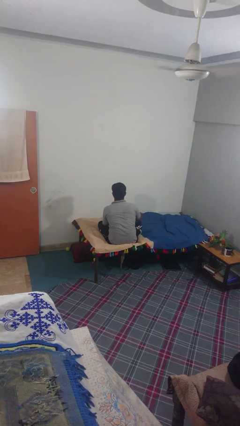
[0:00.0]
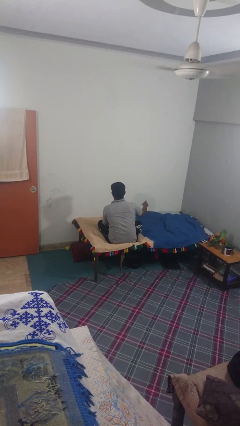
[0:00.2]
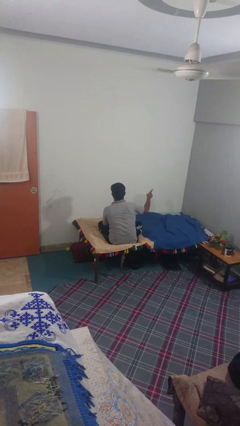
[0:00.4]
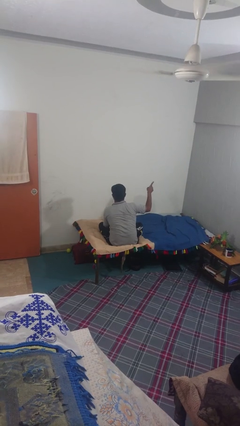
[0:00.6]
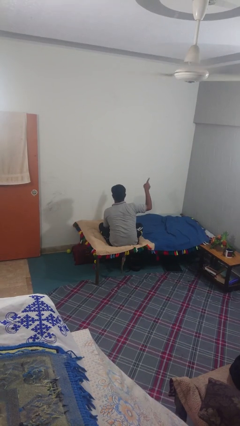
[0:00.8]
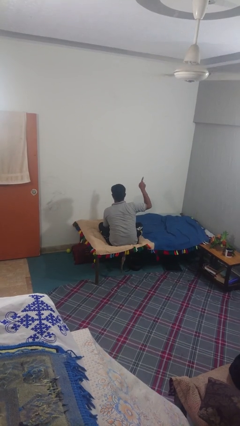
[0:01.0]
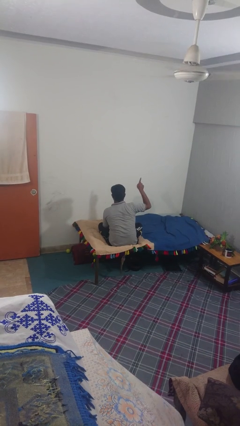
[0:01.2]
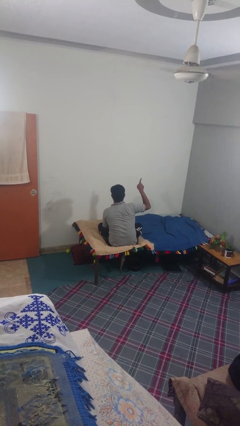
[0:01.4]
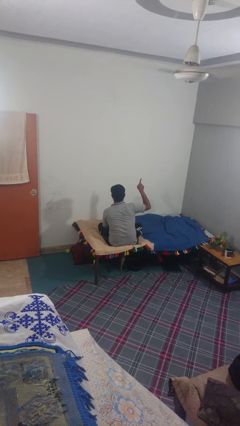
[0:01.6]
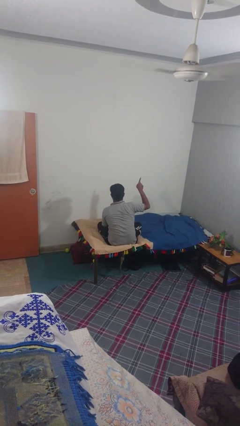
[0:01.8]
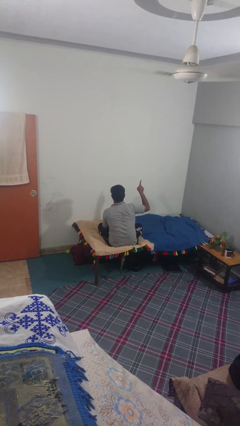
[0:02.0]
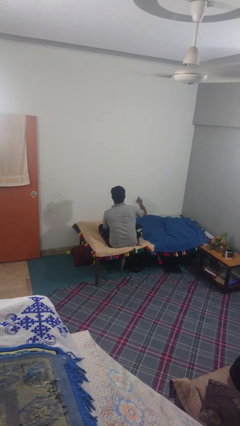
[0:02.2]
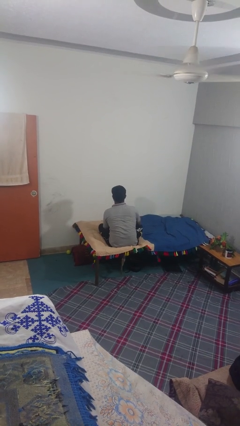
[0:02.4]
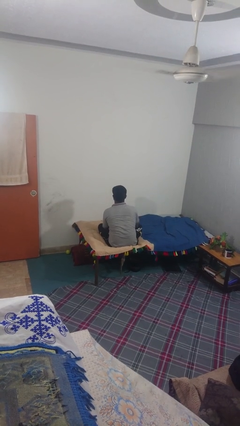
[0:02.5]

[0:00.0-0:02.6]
person gestures number one

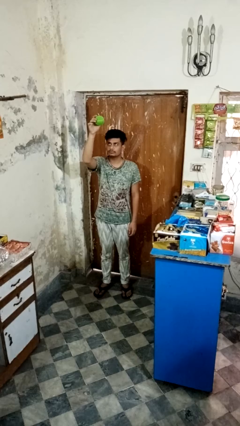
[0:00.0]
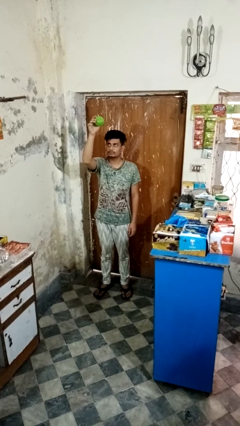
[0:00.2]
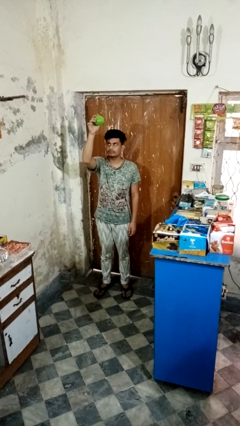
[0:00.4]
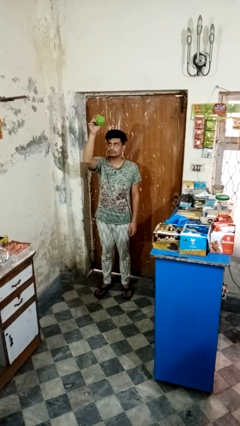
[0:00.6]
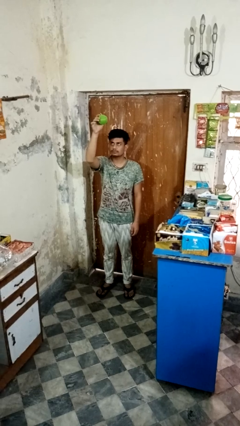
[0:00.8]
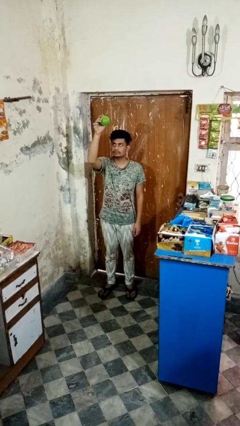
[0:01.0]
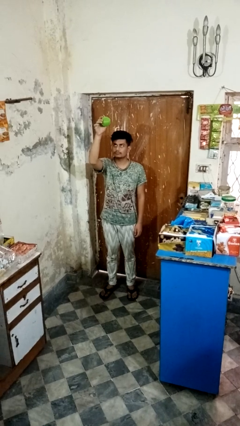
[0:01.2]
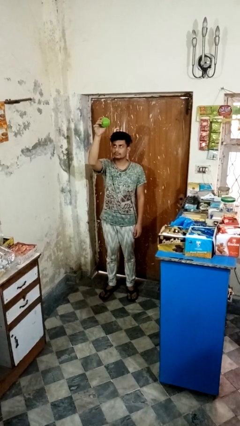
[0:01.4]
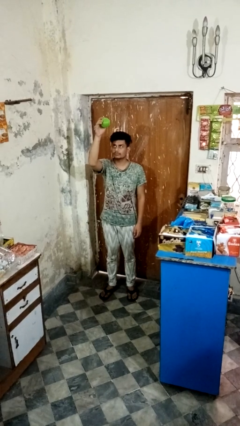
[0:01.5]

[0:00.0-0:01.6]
person drops object

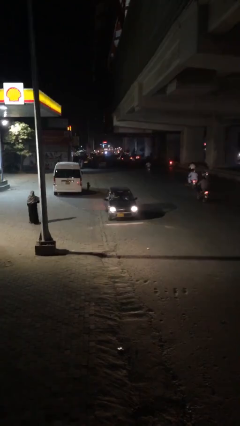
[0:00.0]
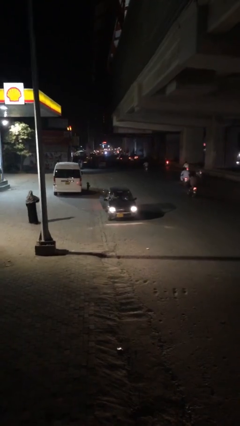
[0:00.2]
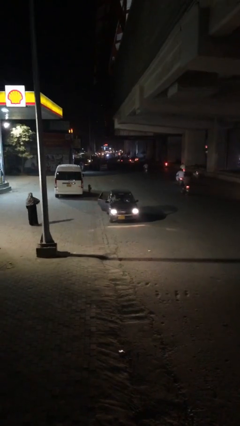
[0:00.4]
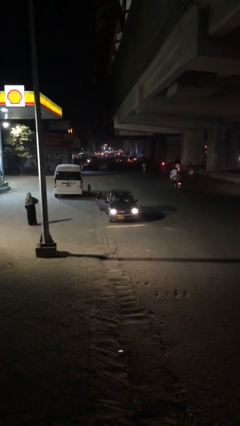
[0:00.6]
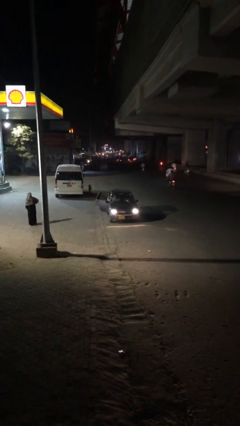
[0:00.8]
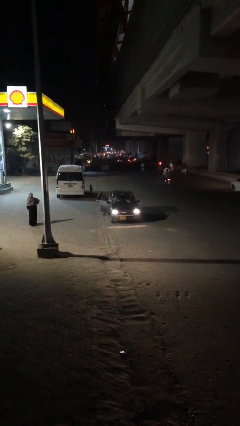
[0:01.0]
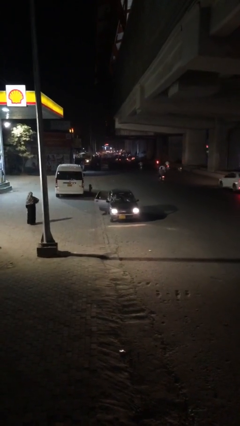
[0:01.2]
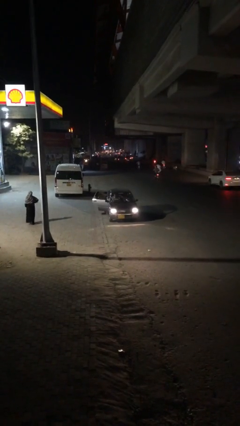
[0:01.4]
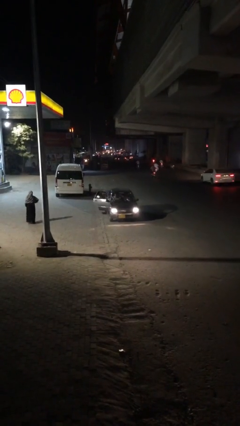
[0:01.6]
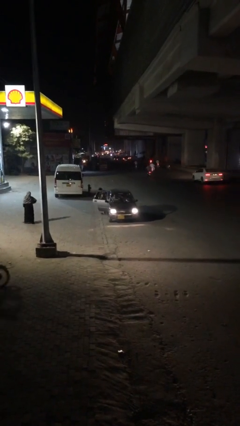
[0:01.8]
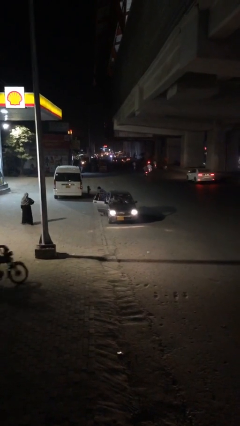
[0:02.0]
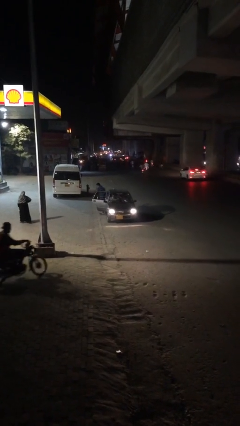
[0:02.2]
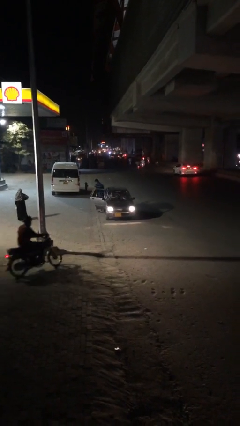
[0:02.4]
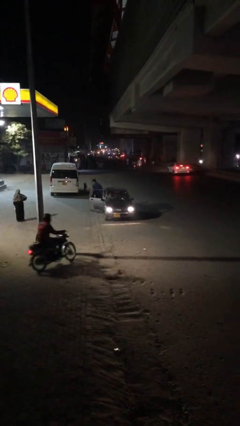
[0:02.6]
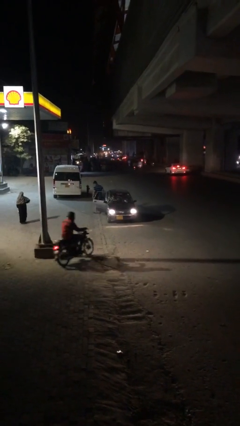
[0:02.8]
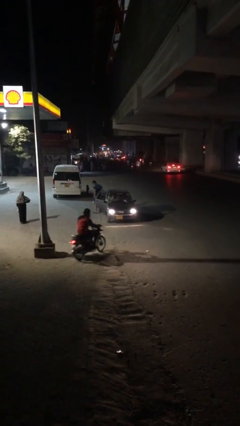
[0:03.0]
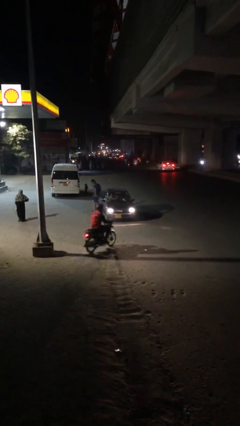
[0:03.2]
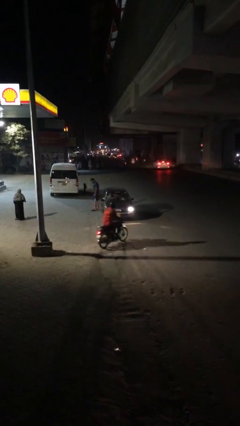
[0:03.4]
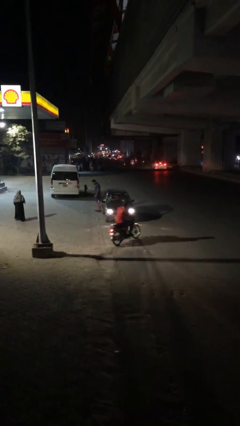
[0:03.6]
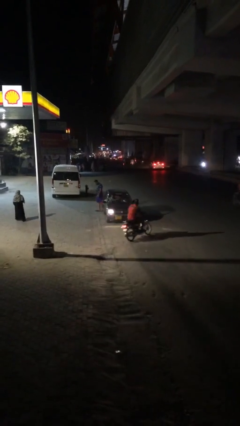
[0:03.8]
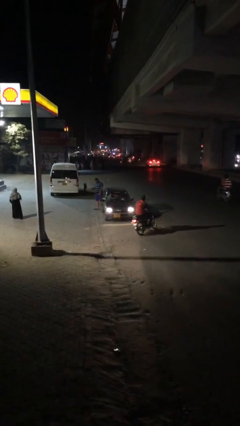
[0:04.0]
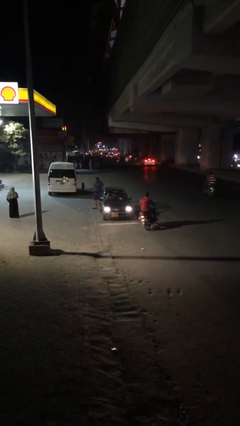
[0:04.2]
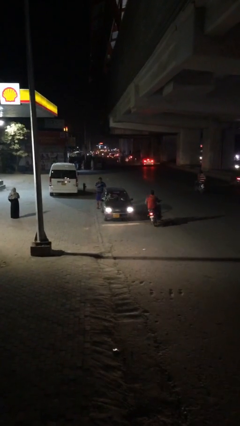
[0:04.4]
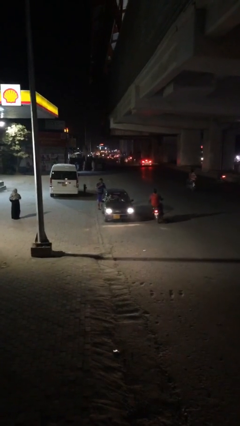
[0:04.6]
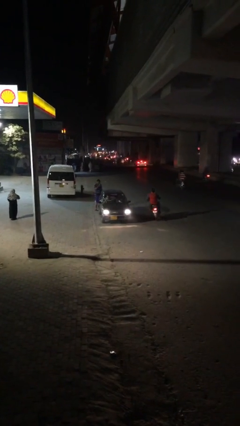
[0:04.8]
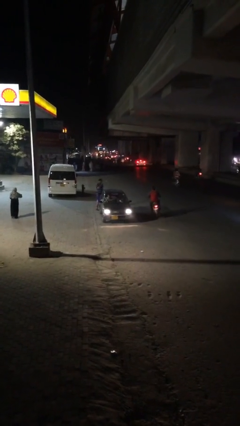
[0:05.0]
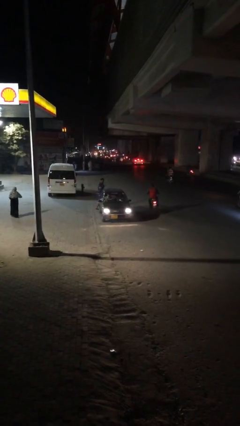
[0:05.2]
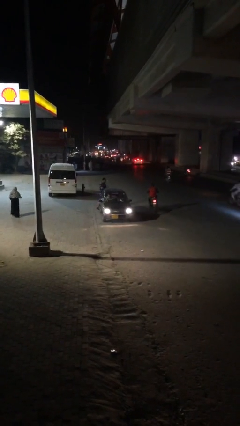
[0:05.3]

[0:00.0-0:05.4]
car drops off person

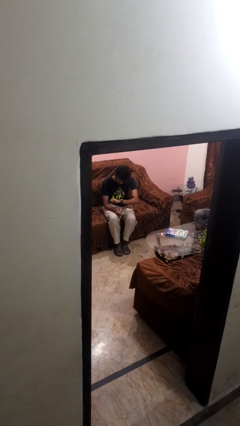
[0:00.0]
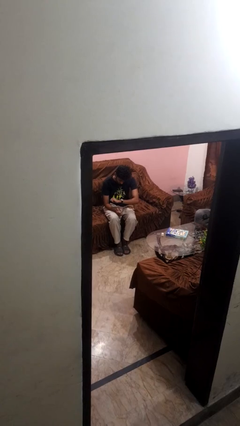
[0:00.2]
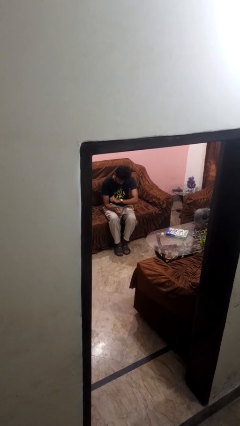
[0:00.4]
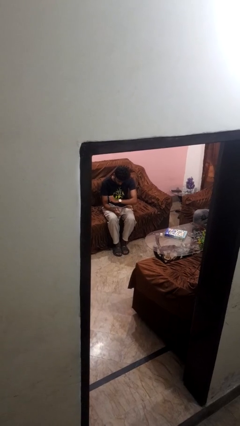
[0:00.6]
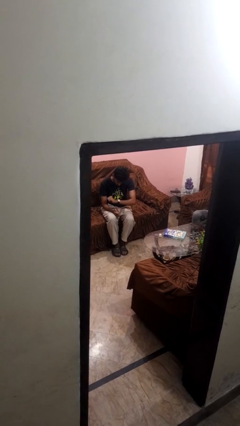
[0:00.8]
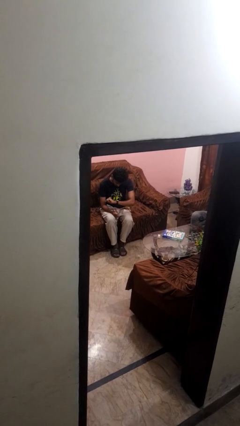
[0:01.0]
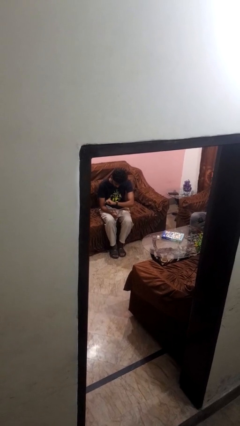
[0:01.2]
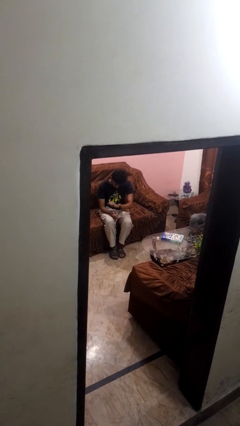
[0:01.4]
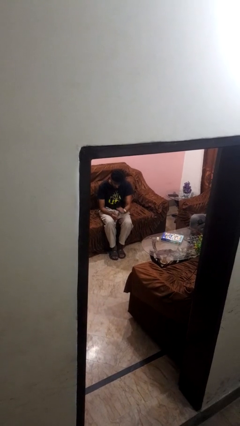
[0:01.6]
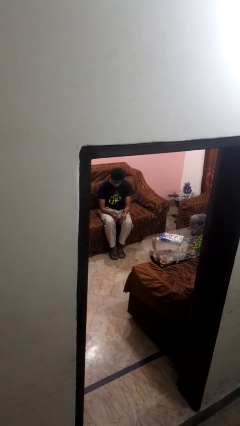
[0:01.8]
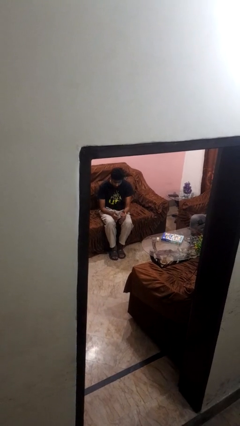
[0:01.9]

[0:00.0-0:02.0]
person looks at wristwatch

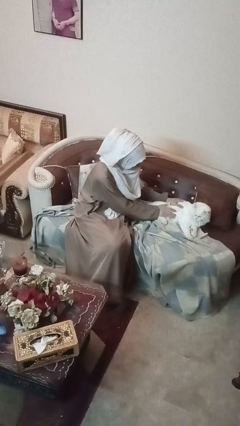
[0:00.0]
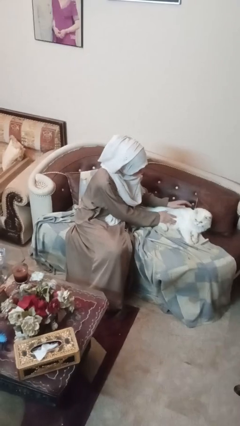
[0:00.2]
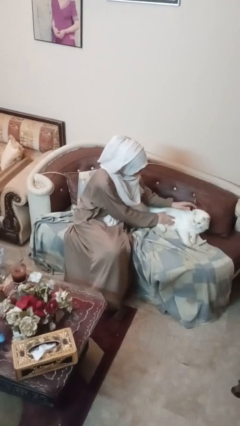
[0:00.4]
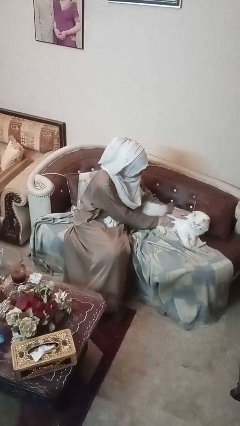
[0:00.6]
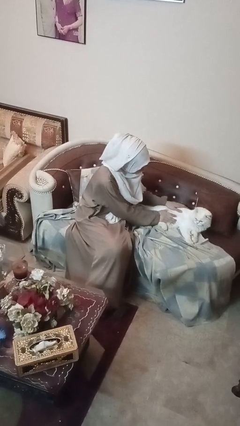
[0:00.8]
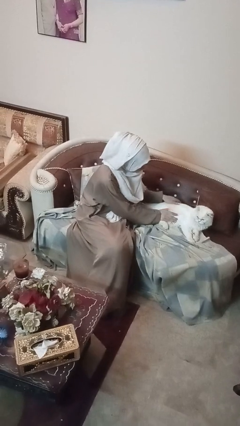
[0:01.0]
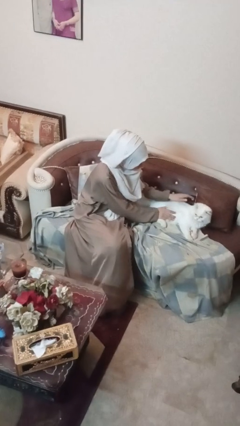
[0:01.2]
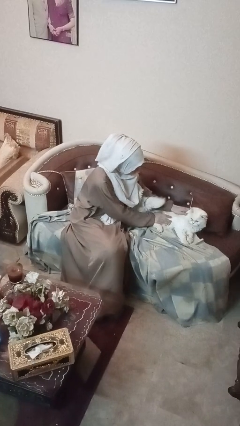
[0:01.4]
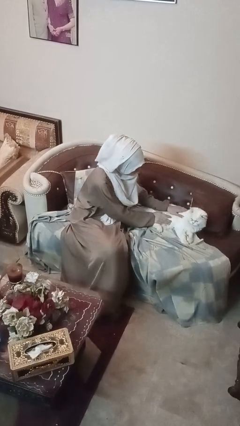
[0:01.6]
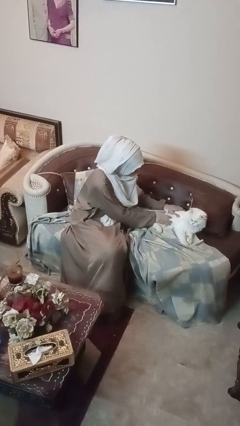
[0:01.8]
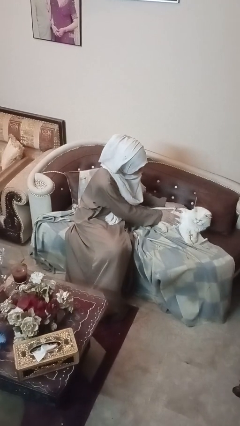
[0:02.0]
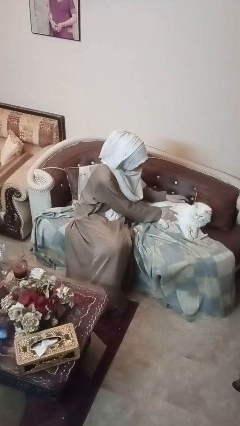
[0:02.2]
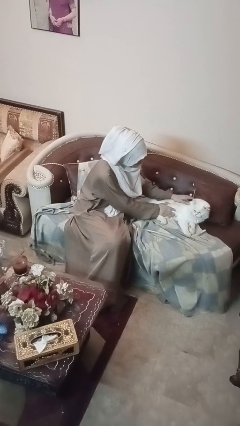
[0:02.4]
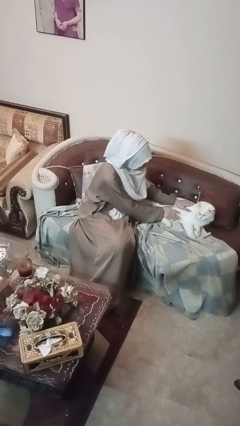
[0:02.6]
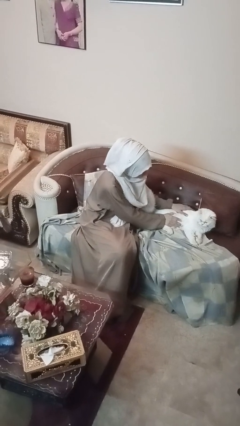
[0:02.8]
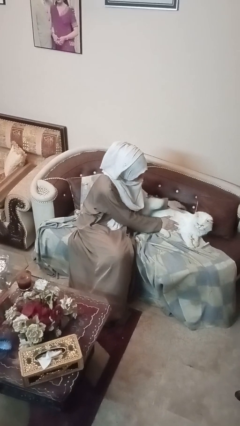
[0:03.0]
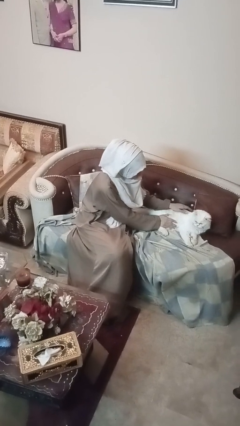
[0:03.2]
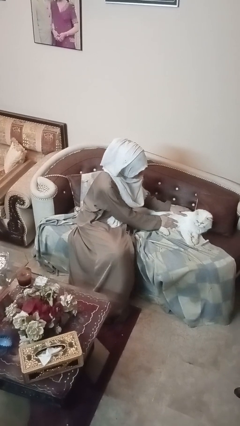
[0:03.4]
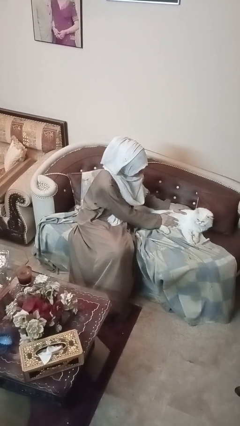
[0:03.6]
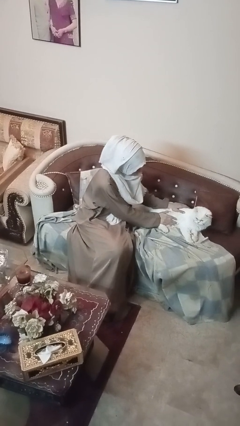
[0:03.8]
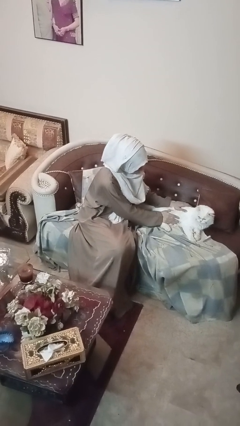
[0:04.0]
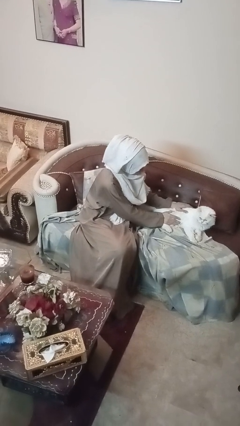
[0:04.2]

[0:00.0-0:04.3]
person pets cat

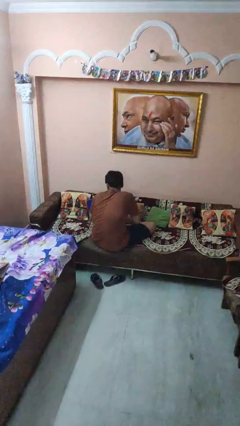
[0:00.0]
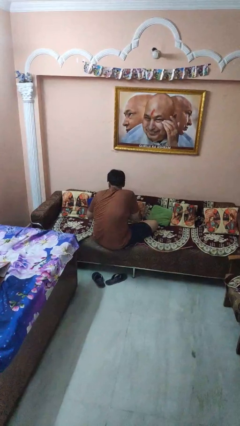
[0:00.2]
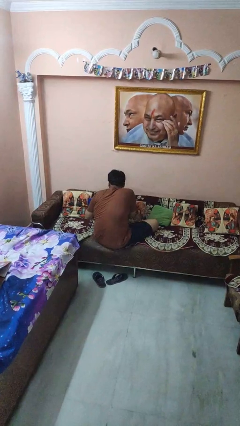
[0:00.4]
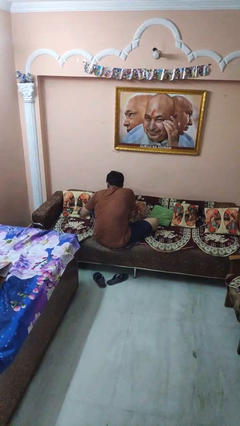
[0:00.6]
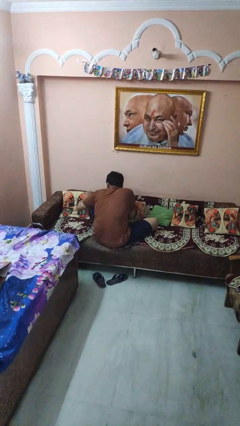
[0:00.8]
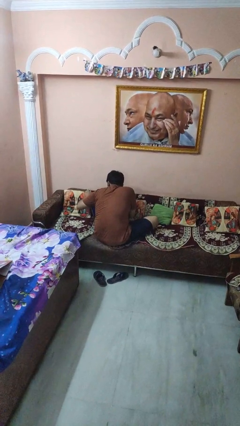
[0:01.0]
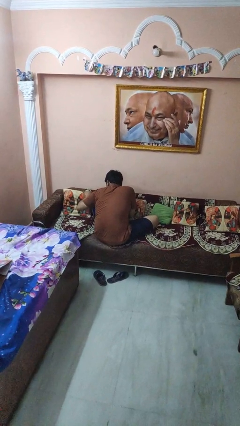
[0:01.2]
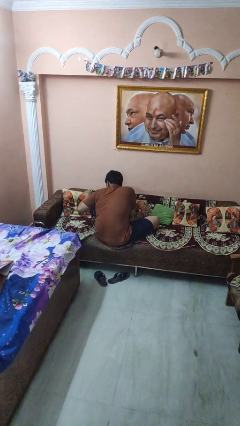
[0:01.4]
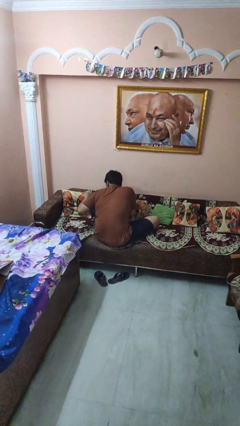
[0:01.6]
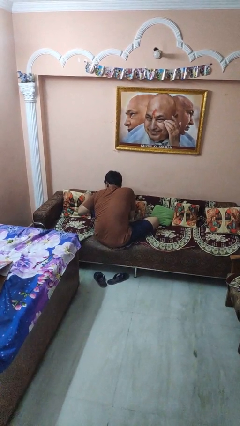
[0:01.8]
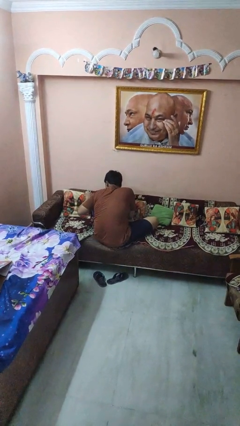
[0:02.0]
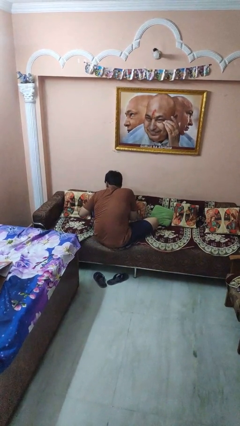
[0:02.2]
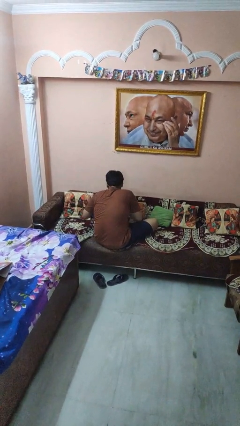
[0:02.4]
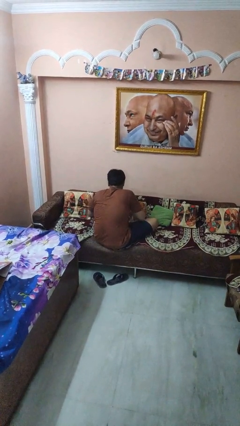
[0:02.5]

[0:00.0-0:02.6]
person searches in couch
